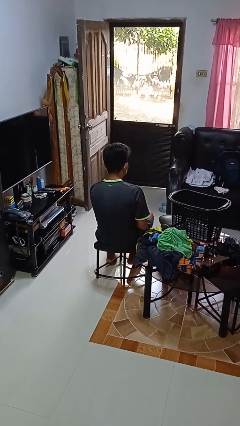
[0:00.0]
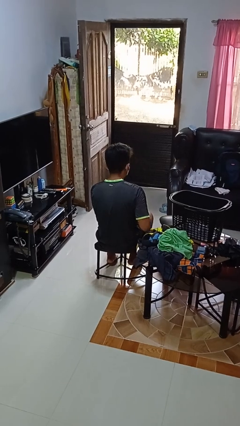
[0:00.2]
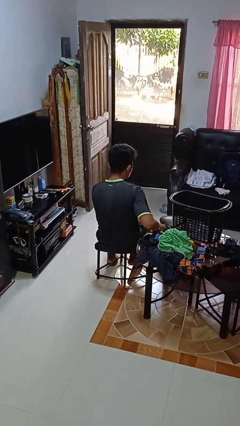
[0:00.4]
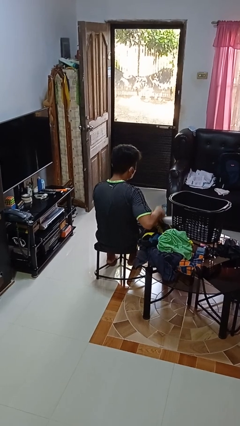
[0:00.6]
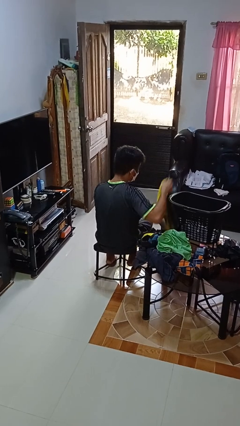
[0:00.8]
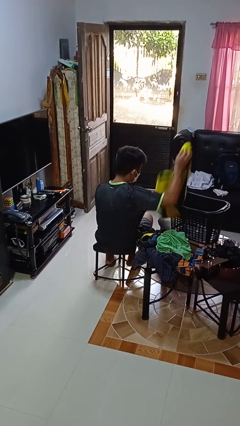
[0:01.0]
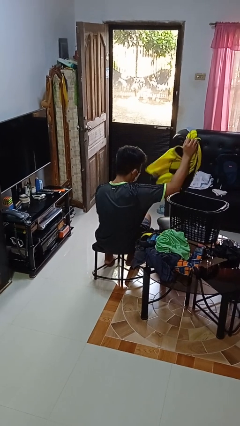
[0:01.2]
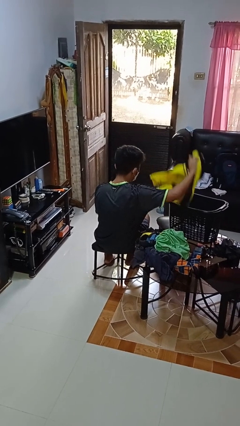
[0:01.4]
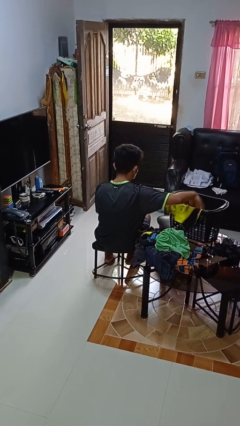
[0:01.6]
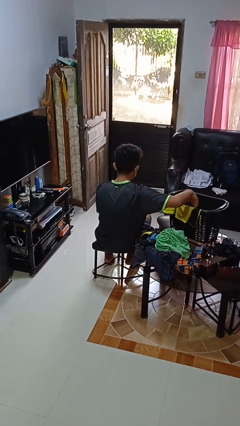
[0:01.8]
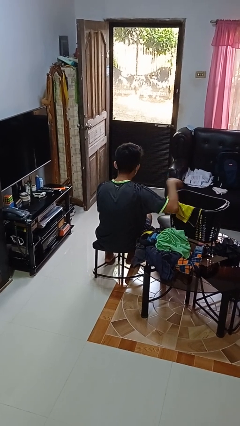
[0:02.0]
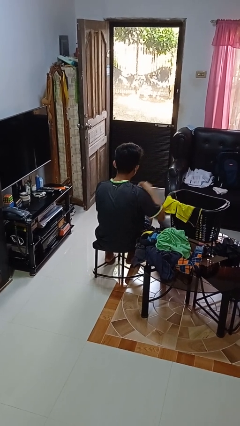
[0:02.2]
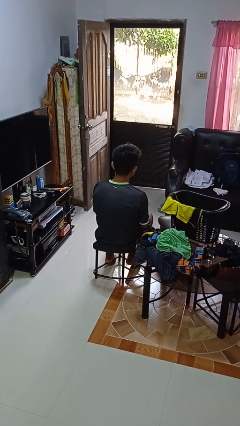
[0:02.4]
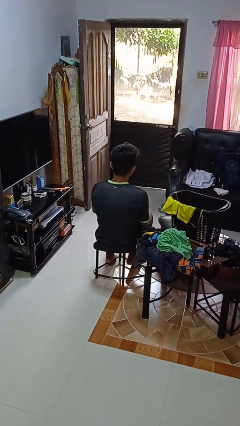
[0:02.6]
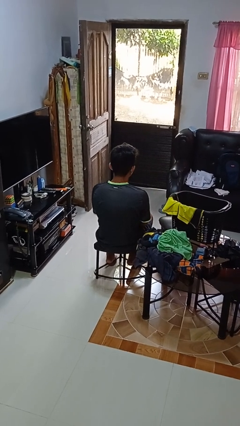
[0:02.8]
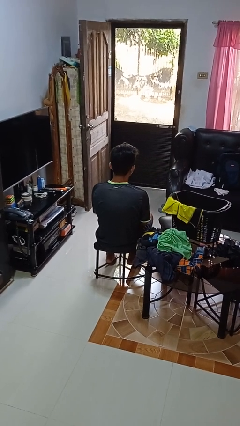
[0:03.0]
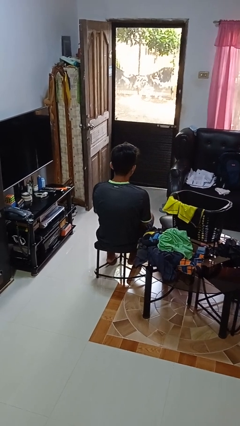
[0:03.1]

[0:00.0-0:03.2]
person puts object into basket

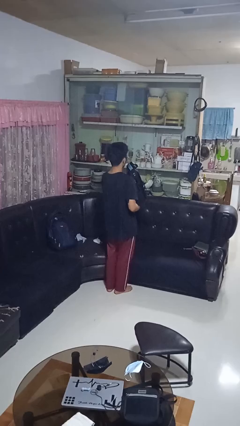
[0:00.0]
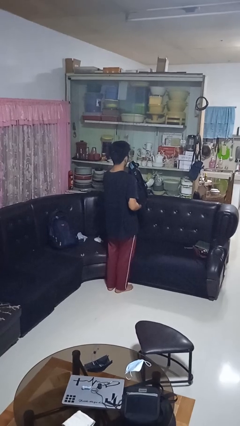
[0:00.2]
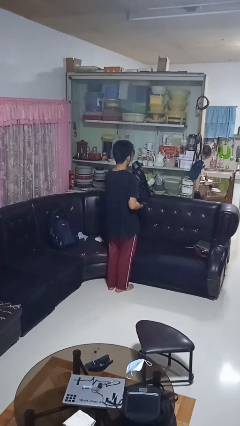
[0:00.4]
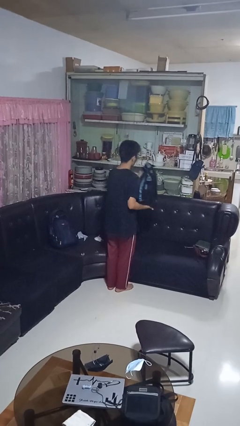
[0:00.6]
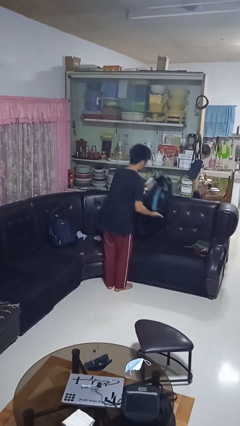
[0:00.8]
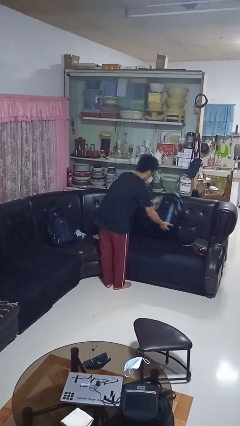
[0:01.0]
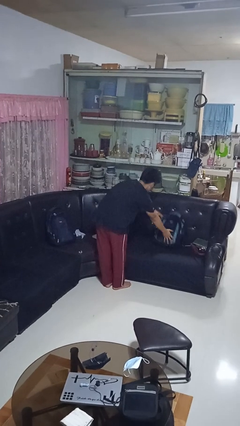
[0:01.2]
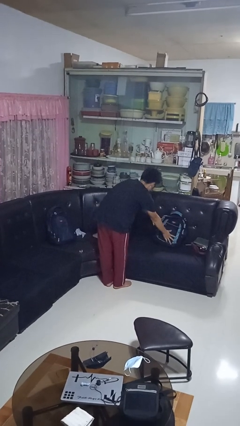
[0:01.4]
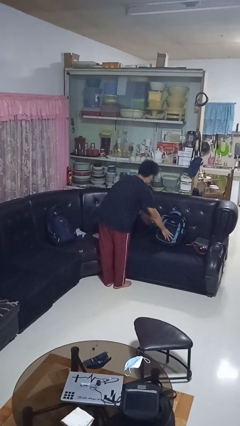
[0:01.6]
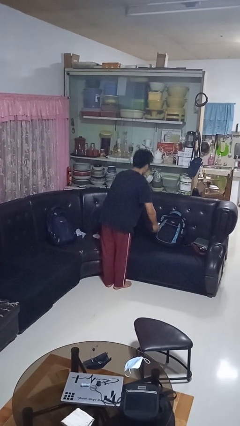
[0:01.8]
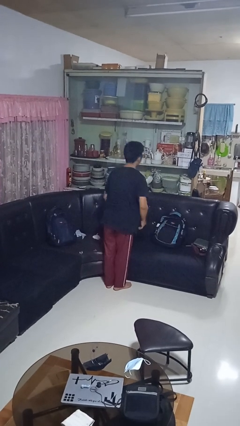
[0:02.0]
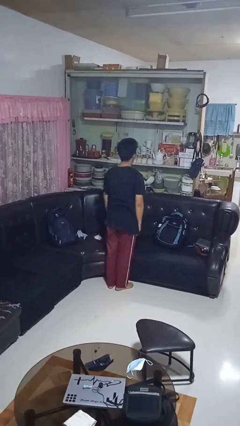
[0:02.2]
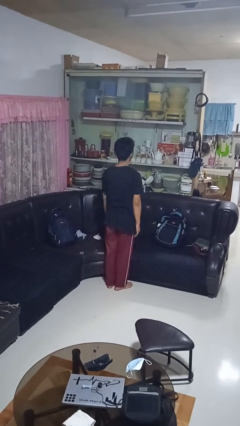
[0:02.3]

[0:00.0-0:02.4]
person puts down object on couch

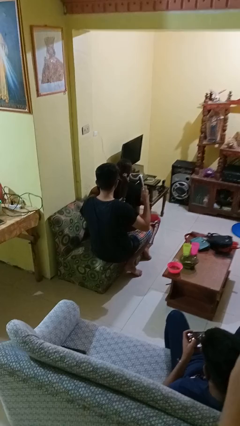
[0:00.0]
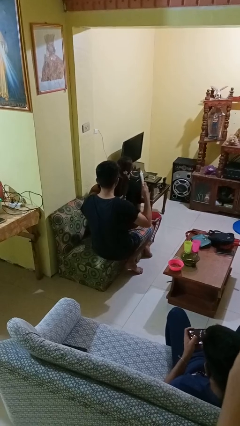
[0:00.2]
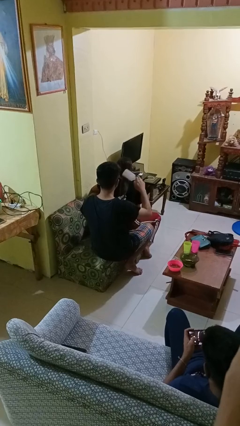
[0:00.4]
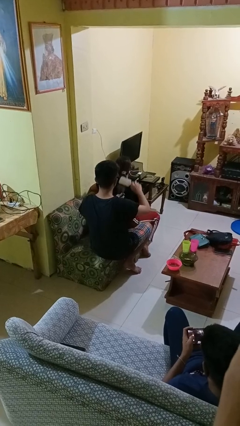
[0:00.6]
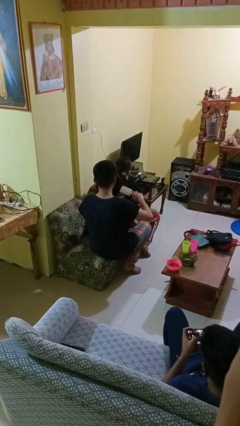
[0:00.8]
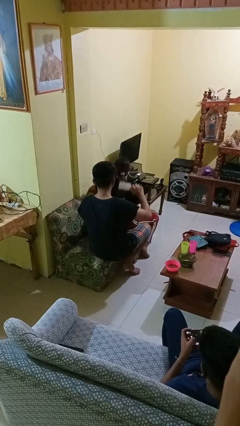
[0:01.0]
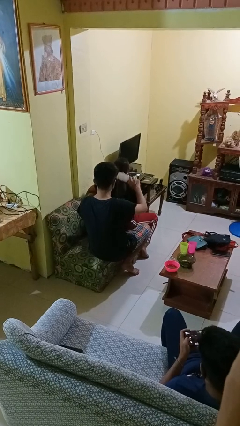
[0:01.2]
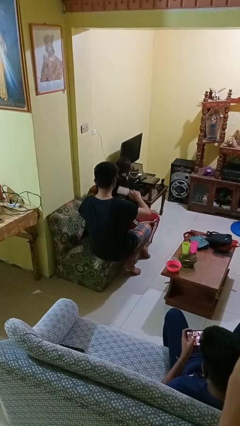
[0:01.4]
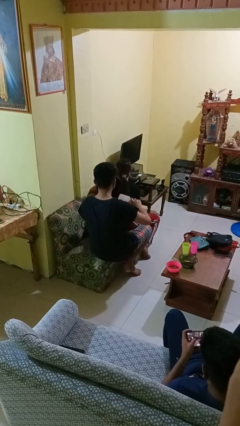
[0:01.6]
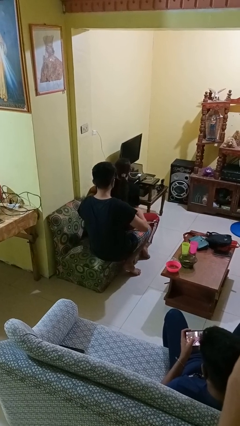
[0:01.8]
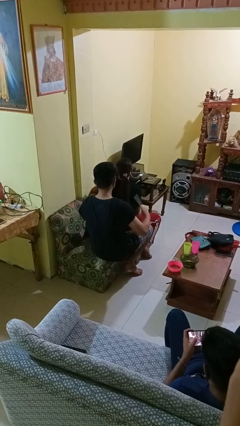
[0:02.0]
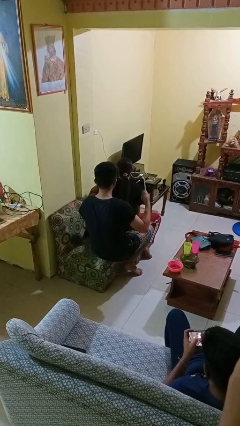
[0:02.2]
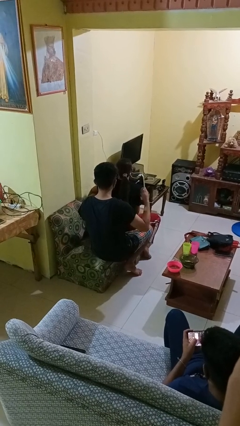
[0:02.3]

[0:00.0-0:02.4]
person brushes hair of person

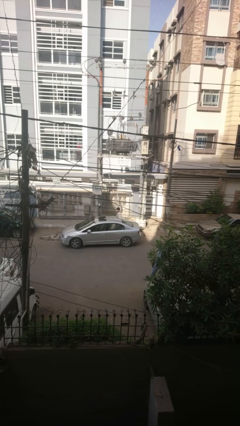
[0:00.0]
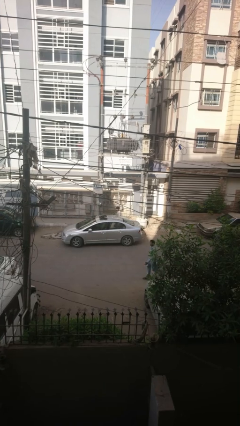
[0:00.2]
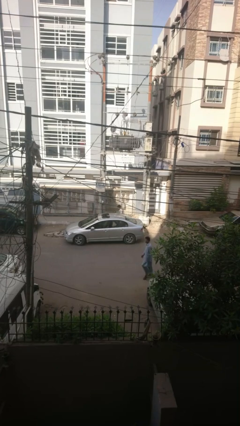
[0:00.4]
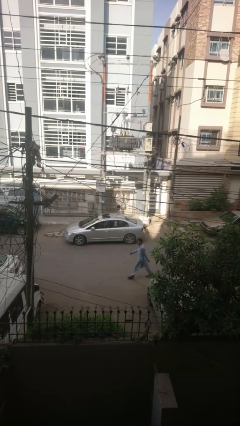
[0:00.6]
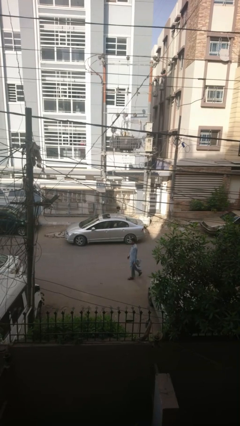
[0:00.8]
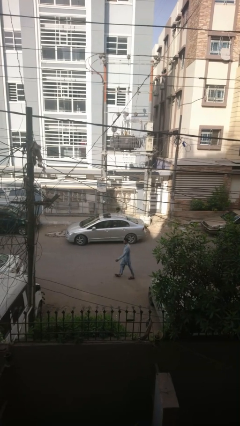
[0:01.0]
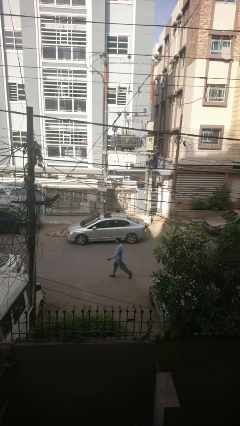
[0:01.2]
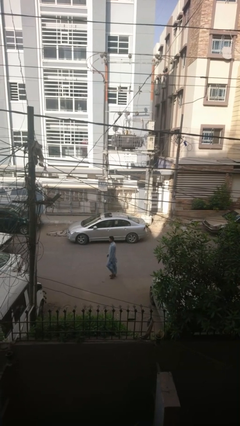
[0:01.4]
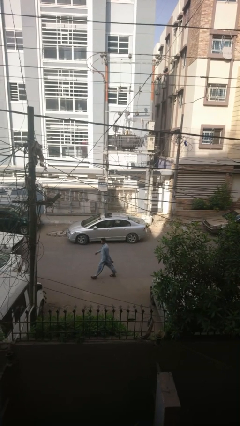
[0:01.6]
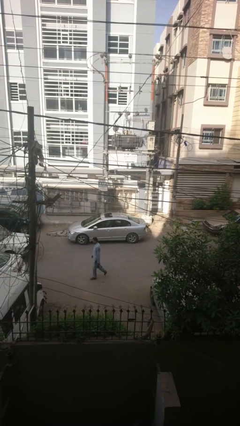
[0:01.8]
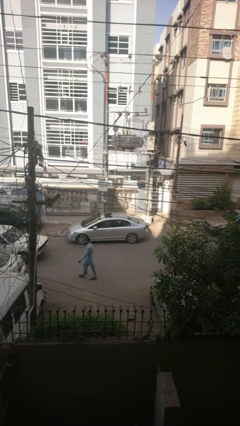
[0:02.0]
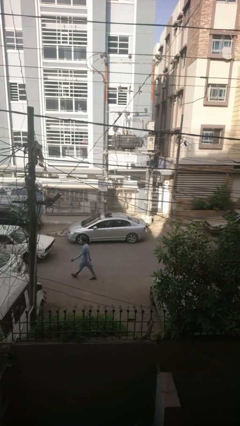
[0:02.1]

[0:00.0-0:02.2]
person enters car

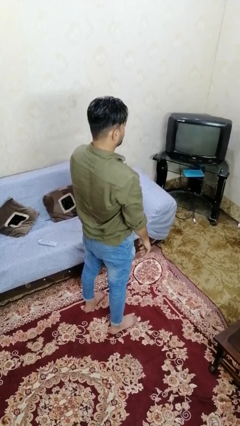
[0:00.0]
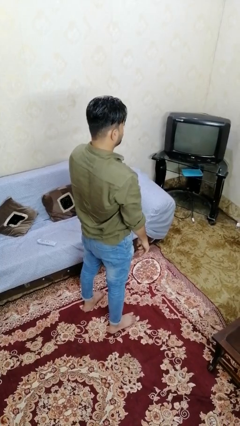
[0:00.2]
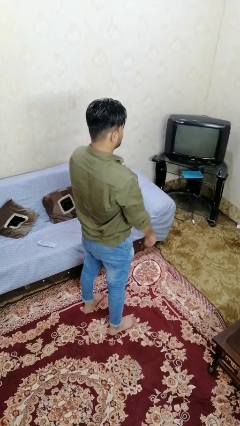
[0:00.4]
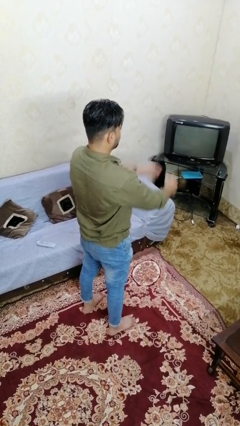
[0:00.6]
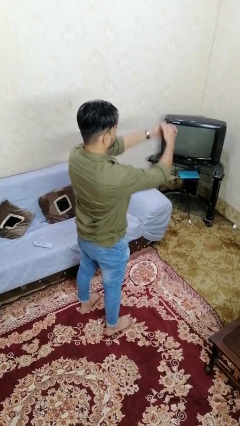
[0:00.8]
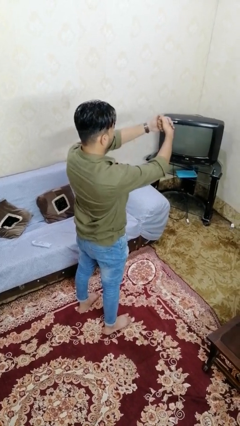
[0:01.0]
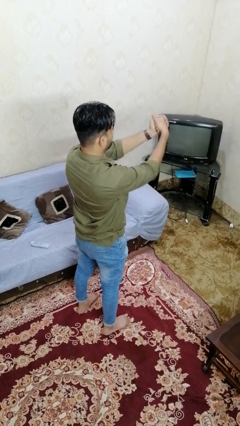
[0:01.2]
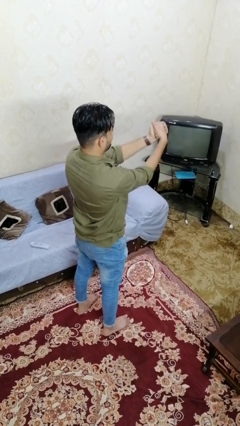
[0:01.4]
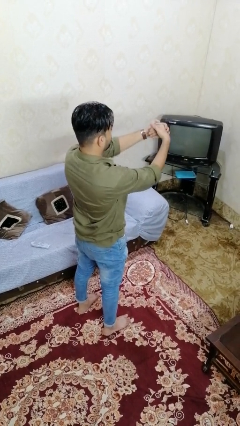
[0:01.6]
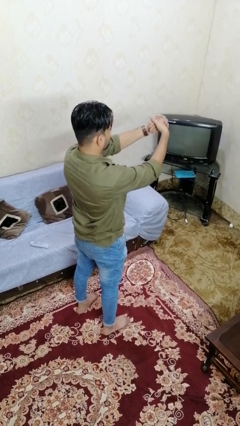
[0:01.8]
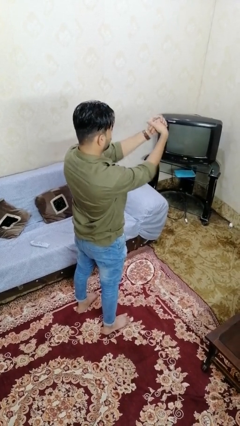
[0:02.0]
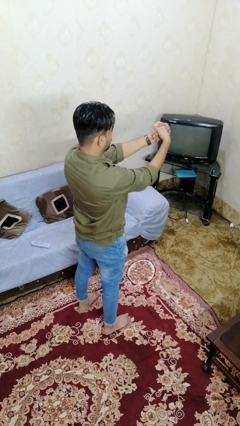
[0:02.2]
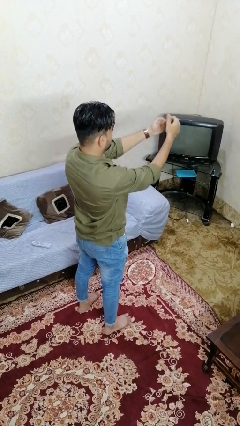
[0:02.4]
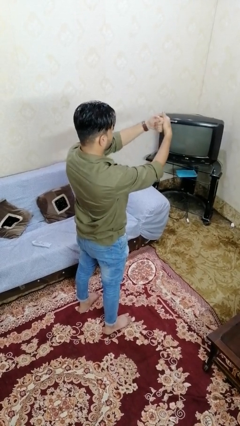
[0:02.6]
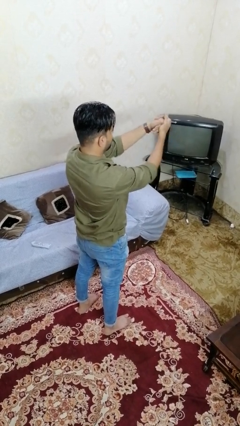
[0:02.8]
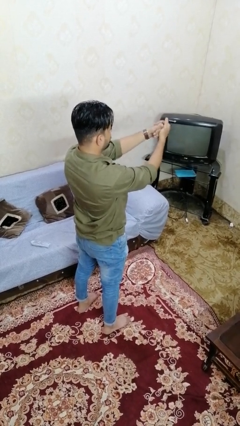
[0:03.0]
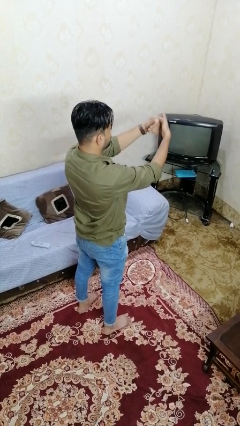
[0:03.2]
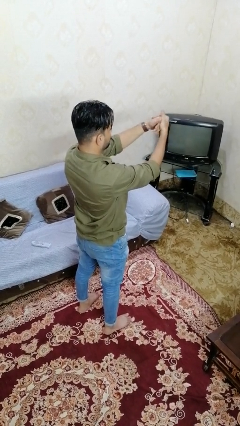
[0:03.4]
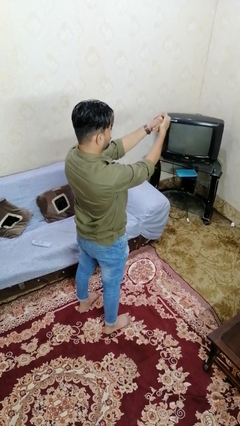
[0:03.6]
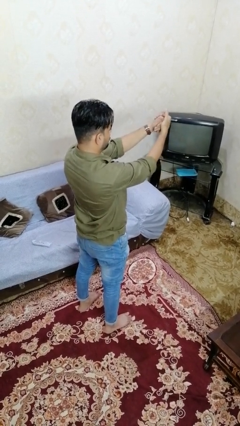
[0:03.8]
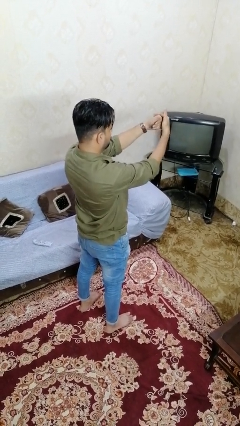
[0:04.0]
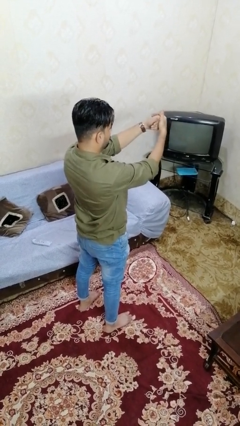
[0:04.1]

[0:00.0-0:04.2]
person cracks knuckles

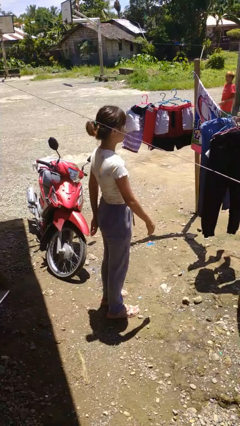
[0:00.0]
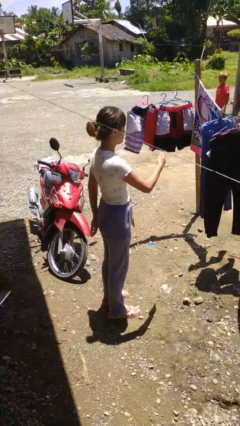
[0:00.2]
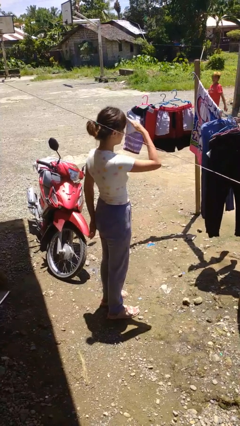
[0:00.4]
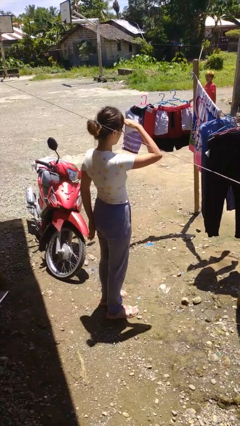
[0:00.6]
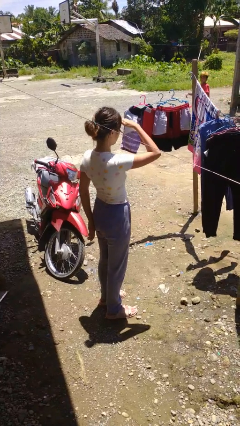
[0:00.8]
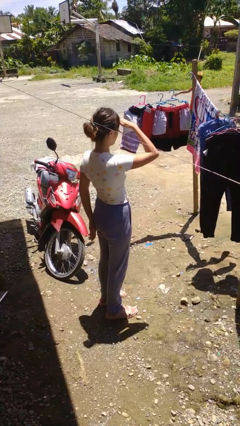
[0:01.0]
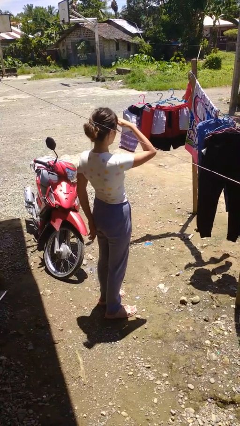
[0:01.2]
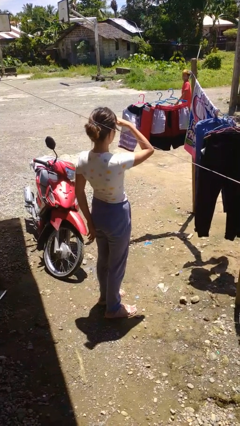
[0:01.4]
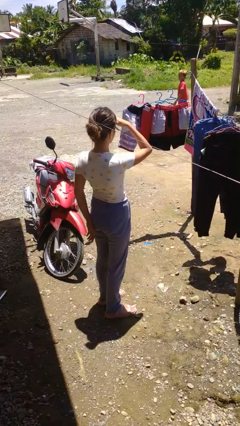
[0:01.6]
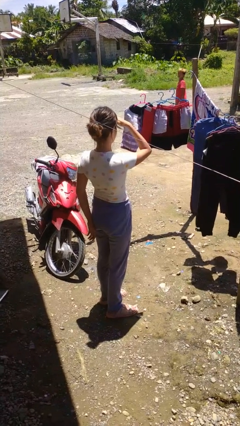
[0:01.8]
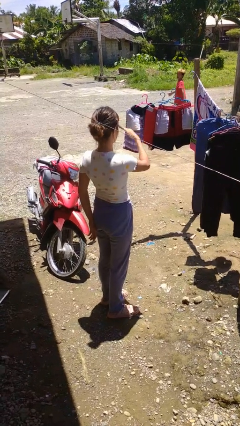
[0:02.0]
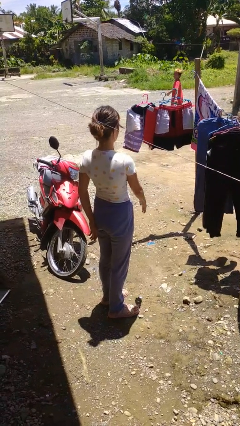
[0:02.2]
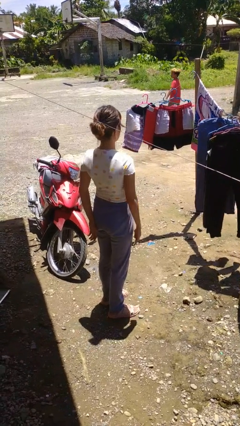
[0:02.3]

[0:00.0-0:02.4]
person shades eyes

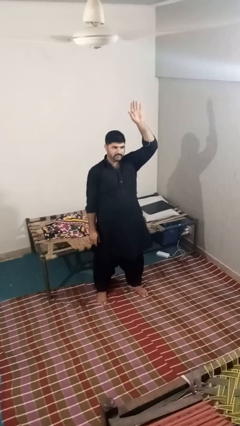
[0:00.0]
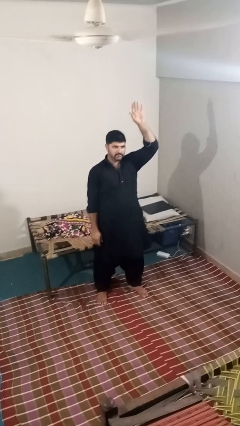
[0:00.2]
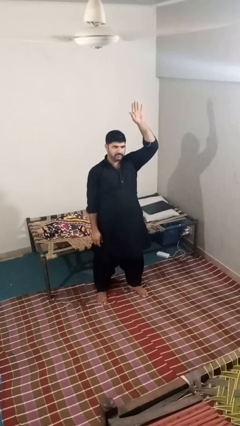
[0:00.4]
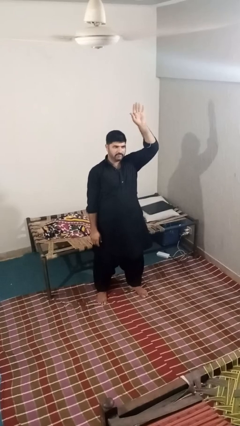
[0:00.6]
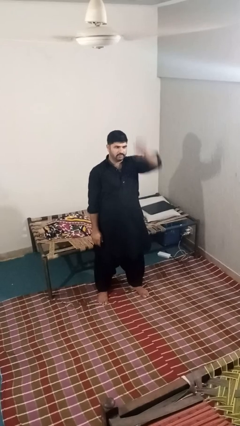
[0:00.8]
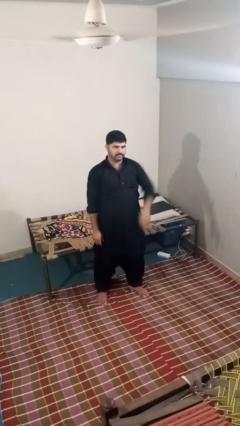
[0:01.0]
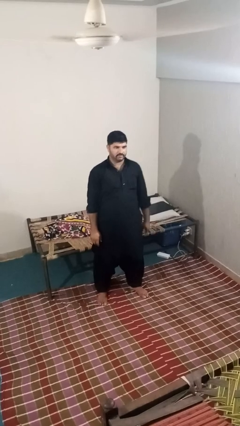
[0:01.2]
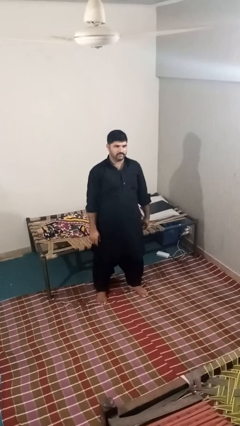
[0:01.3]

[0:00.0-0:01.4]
person gestures lower hand
